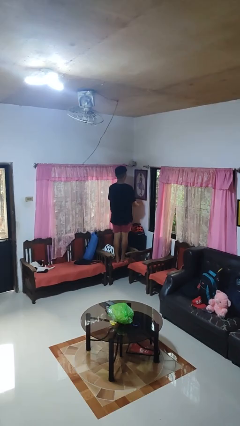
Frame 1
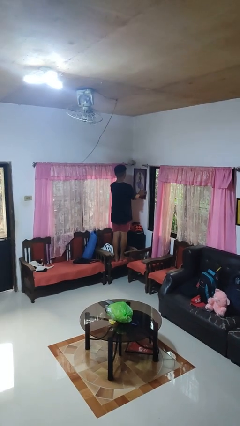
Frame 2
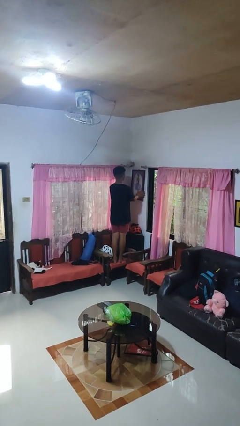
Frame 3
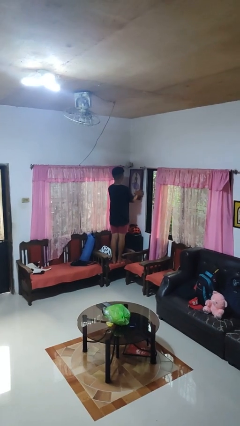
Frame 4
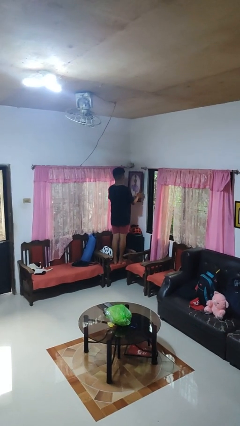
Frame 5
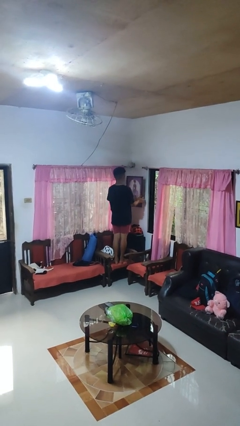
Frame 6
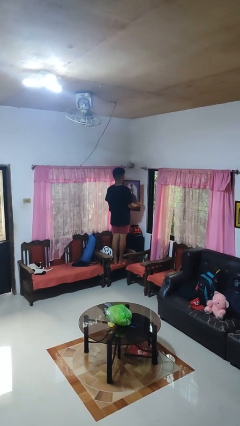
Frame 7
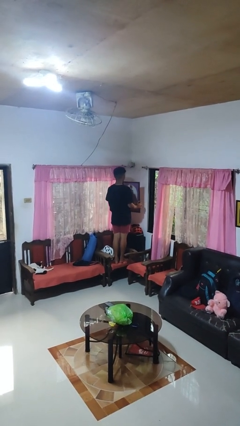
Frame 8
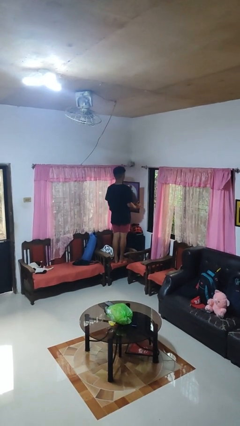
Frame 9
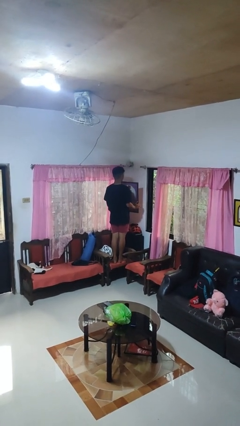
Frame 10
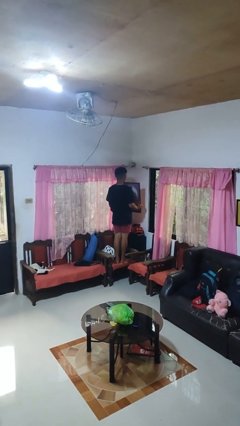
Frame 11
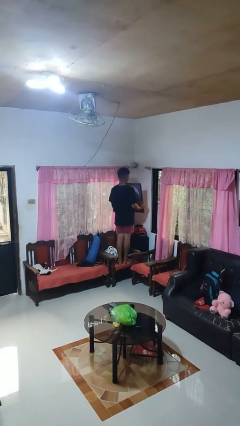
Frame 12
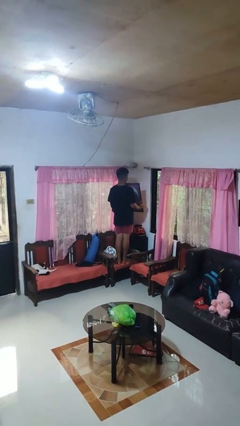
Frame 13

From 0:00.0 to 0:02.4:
person takes down picture frame

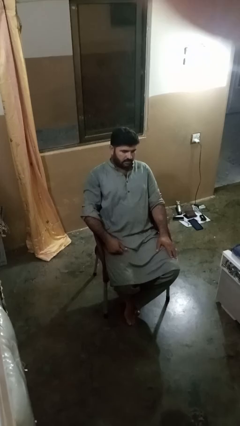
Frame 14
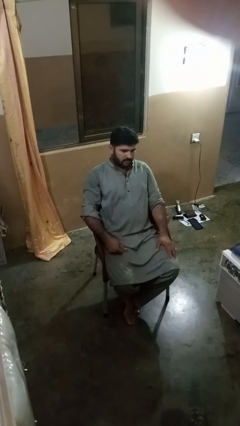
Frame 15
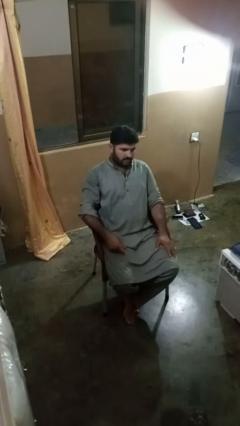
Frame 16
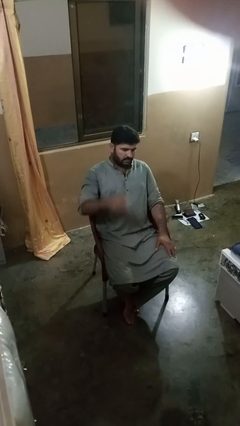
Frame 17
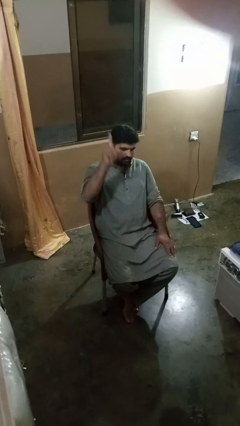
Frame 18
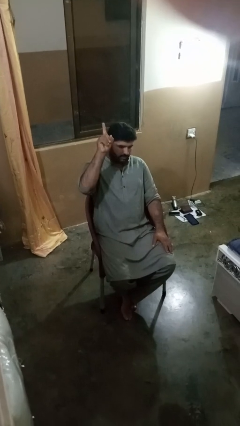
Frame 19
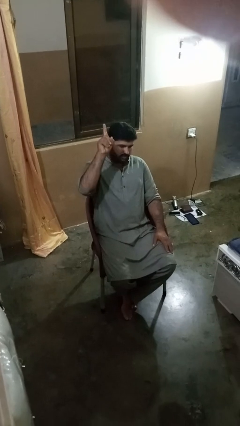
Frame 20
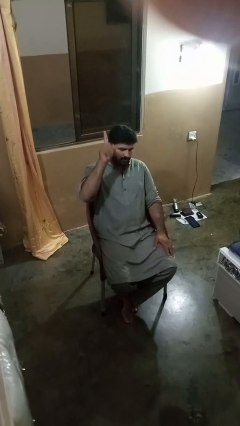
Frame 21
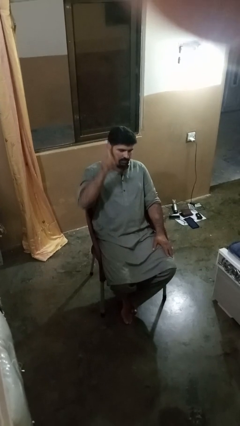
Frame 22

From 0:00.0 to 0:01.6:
person gestures number one

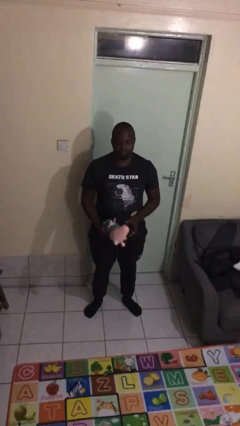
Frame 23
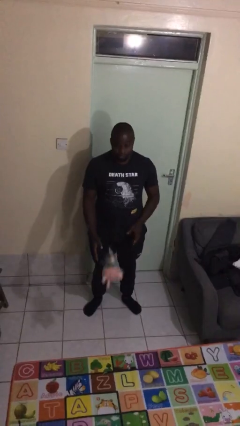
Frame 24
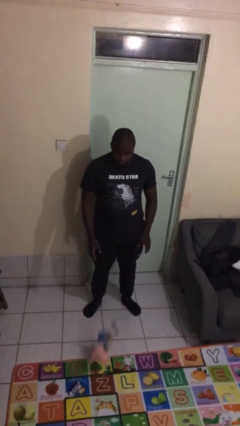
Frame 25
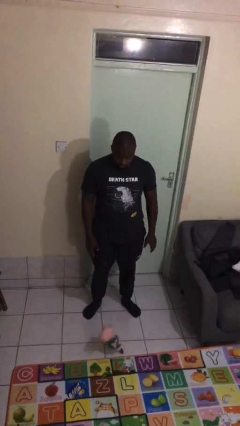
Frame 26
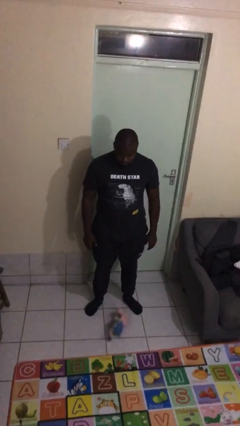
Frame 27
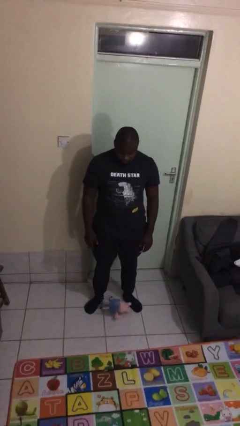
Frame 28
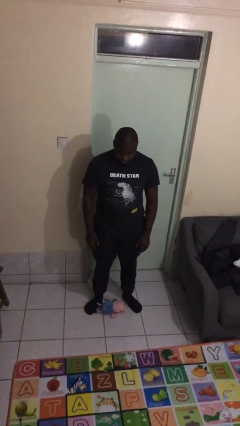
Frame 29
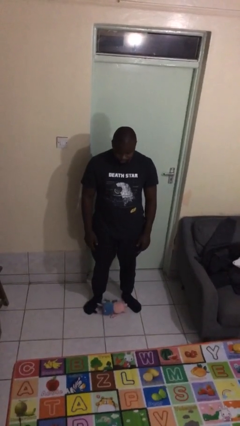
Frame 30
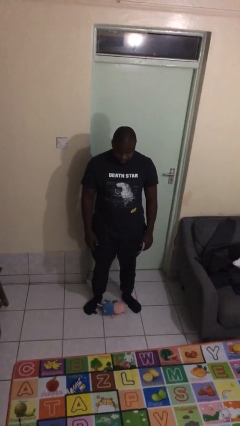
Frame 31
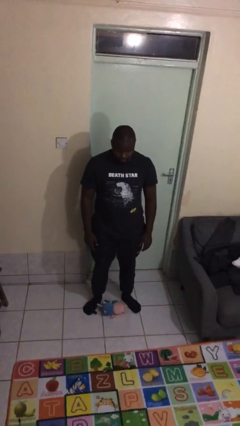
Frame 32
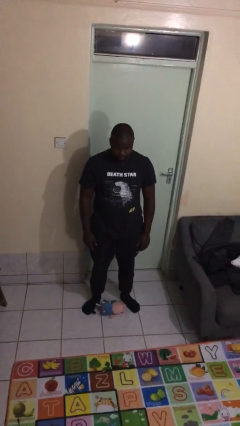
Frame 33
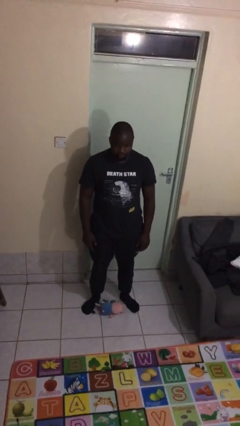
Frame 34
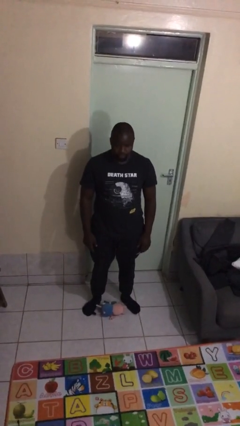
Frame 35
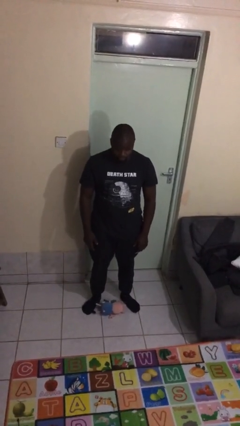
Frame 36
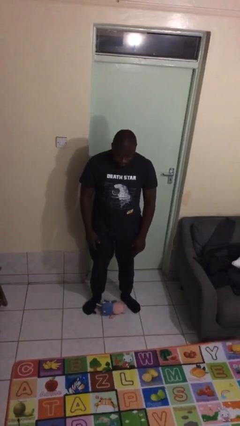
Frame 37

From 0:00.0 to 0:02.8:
person drops object

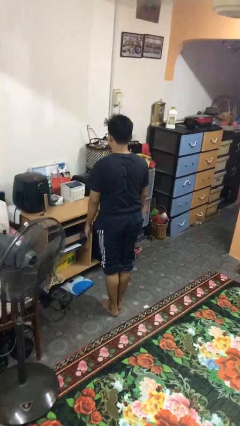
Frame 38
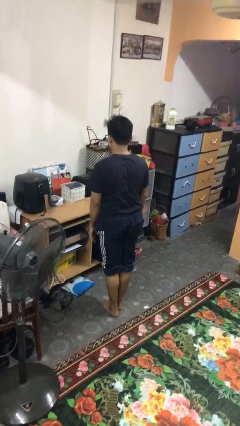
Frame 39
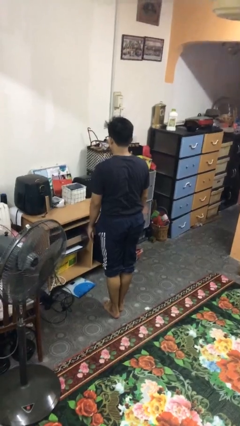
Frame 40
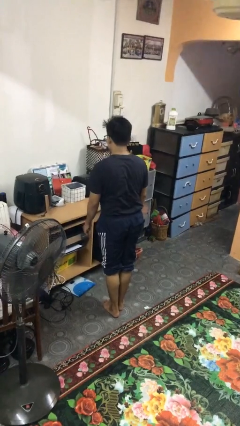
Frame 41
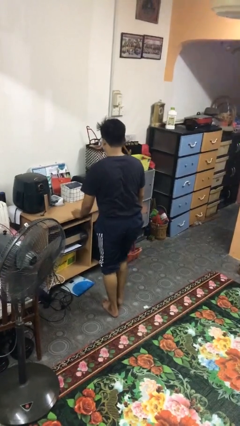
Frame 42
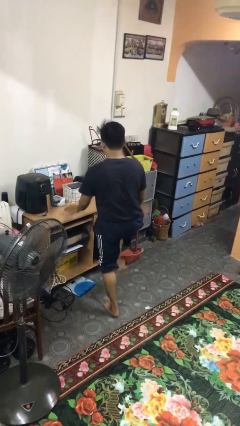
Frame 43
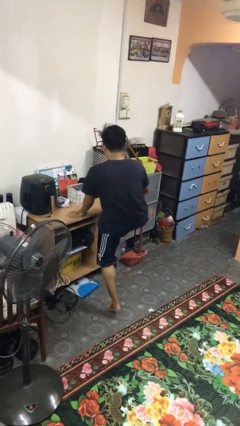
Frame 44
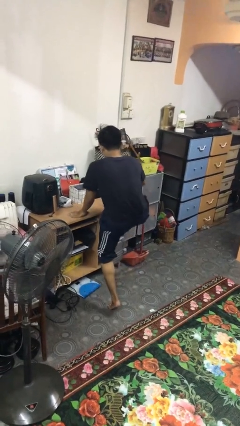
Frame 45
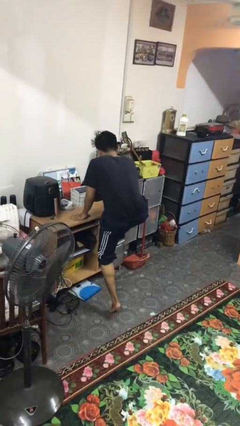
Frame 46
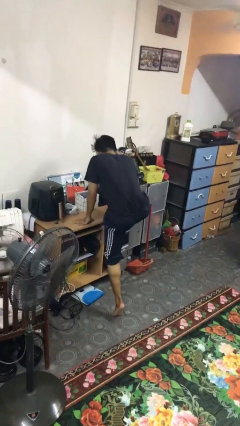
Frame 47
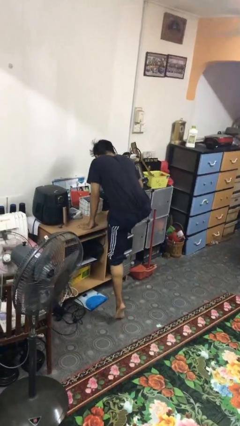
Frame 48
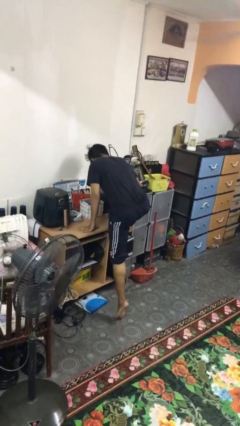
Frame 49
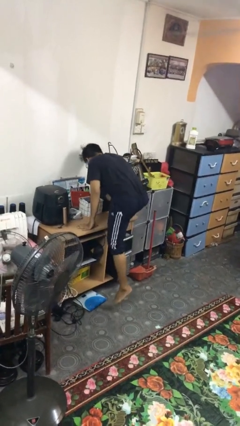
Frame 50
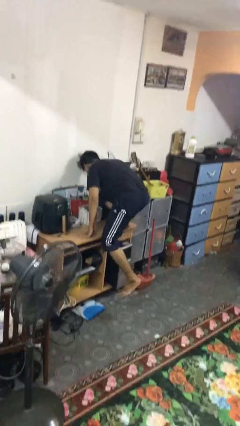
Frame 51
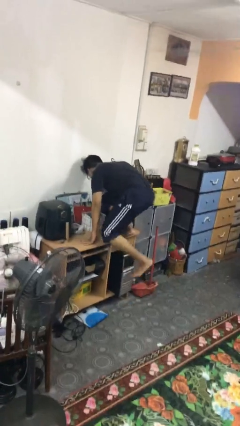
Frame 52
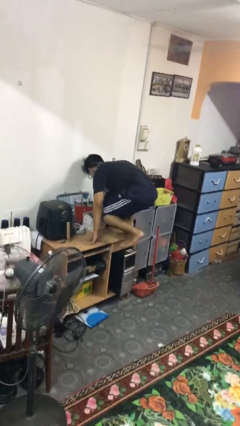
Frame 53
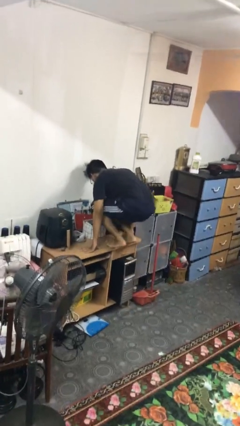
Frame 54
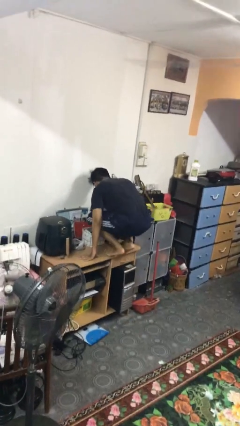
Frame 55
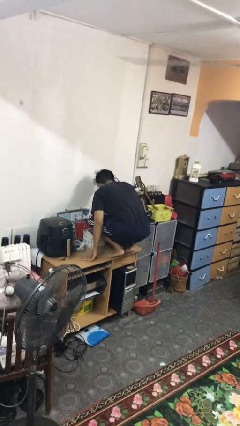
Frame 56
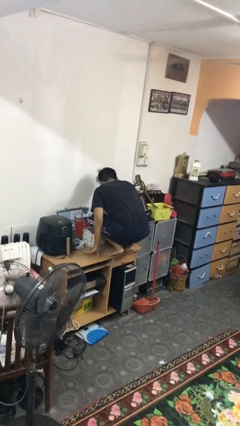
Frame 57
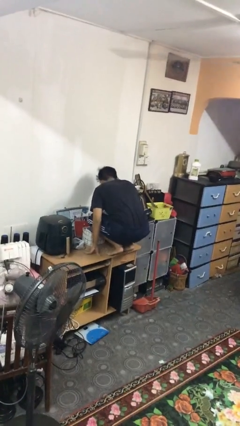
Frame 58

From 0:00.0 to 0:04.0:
person climbs on table

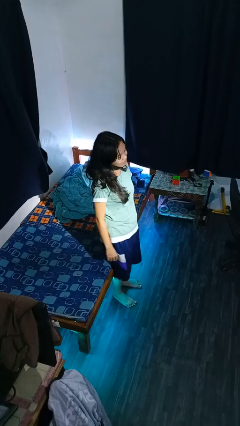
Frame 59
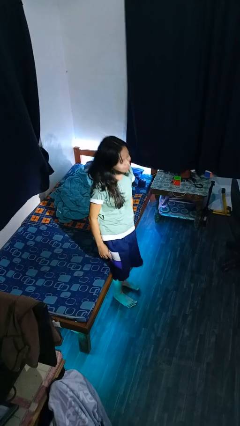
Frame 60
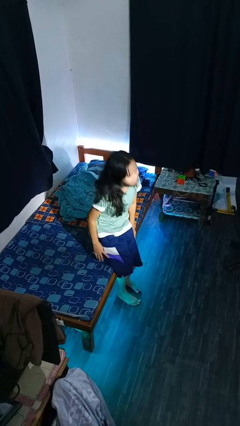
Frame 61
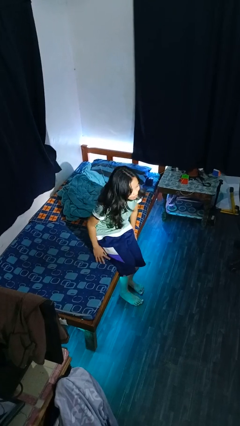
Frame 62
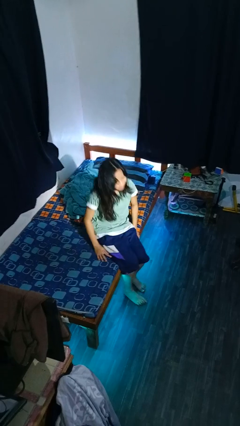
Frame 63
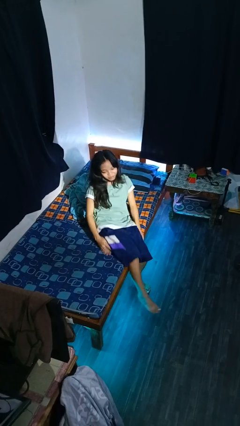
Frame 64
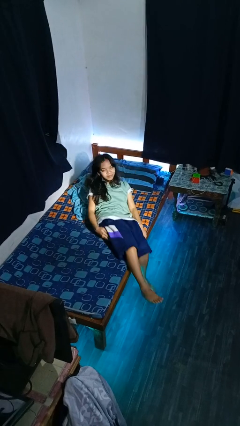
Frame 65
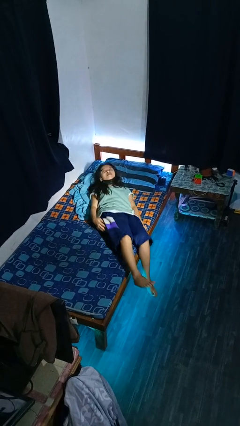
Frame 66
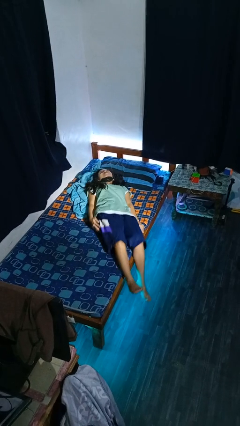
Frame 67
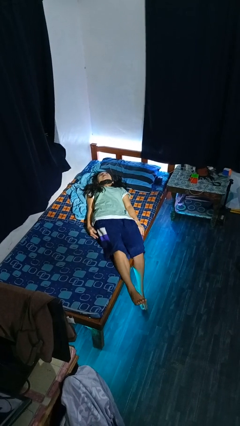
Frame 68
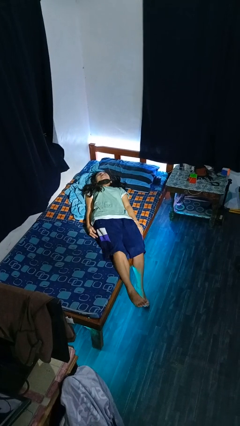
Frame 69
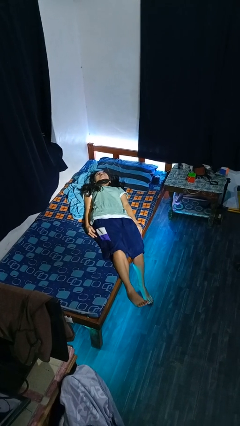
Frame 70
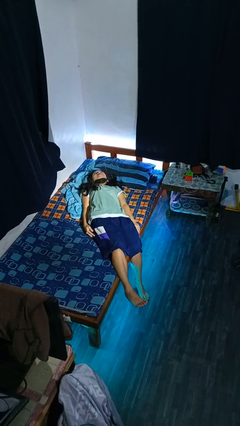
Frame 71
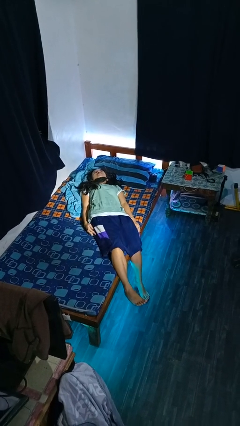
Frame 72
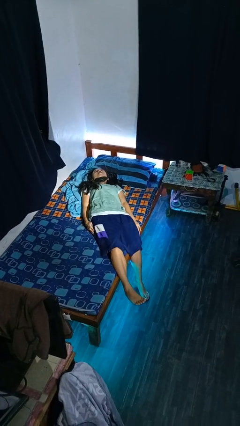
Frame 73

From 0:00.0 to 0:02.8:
person lies down on bed

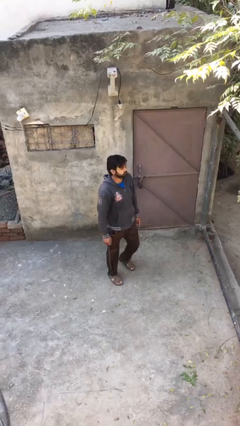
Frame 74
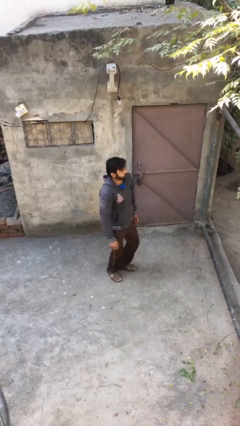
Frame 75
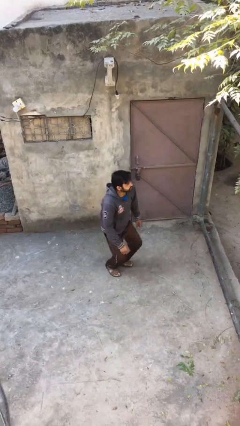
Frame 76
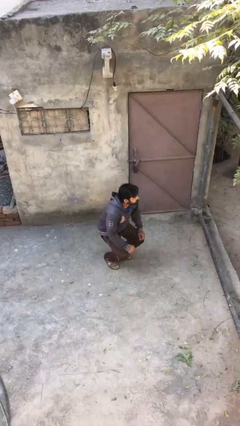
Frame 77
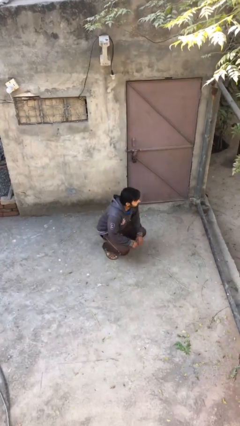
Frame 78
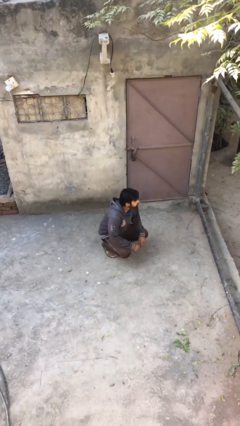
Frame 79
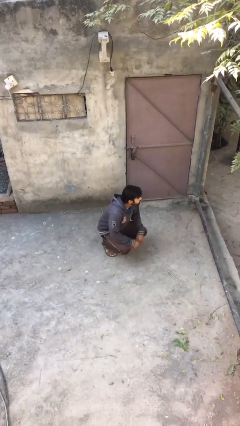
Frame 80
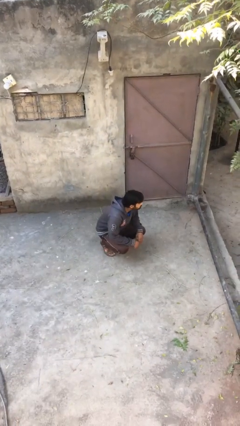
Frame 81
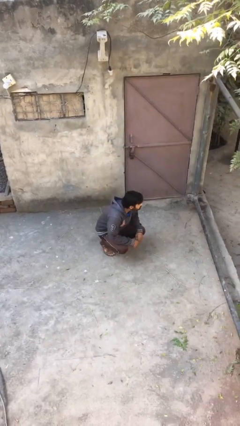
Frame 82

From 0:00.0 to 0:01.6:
person sits down

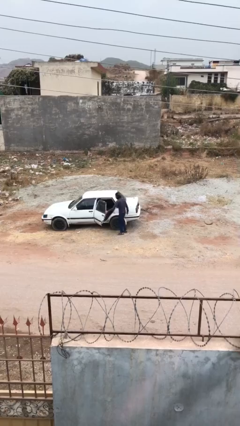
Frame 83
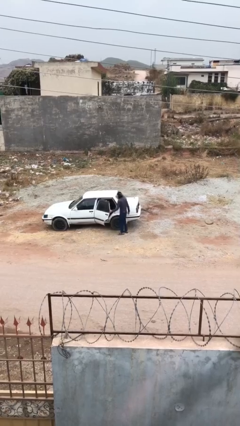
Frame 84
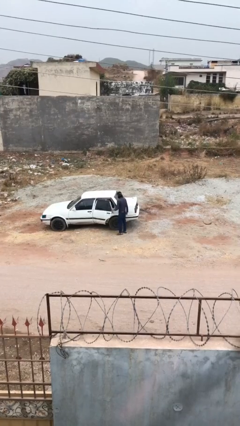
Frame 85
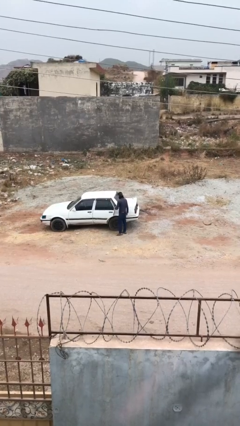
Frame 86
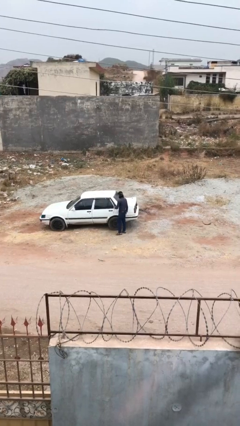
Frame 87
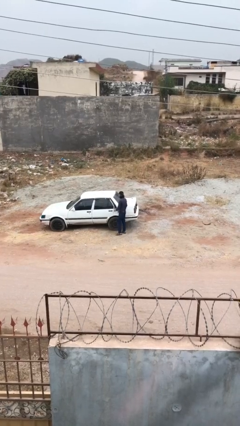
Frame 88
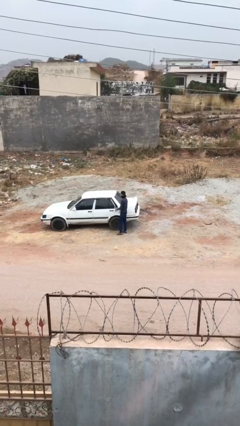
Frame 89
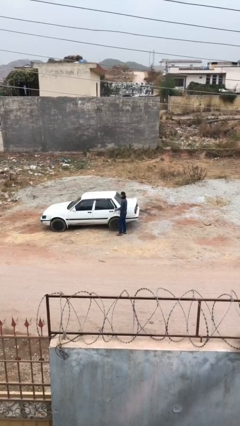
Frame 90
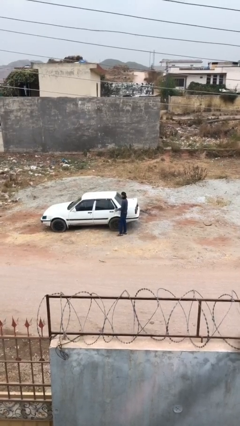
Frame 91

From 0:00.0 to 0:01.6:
person closes car door
